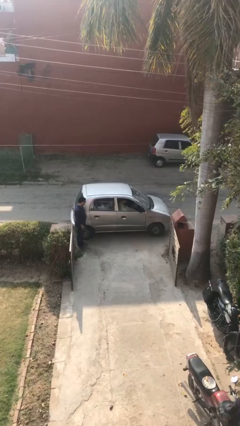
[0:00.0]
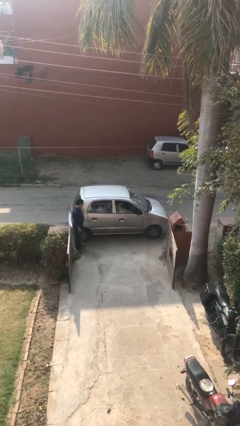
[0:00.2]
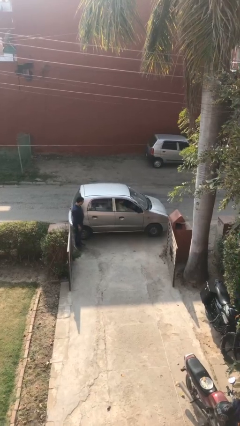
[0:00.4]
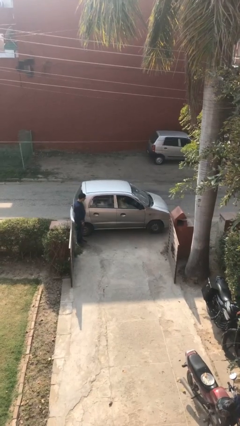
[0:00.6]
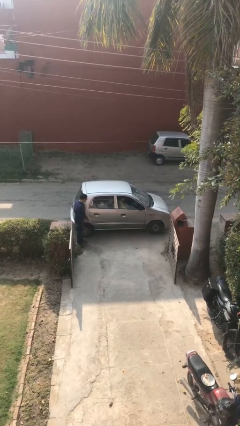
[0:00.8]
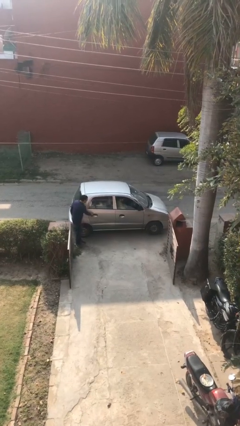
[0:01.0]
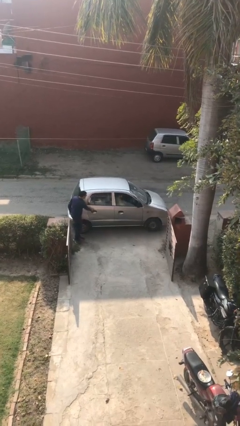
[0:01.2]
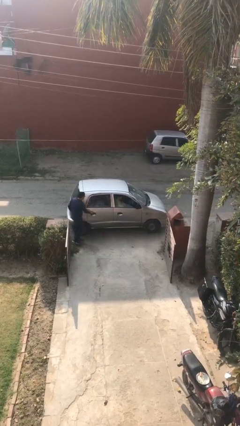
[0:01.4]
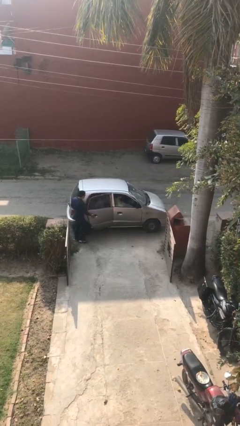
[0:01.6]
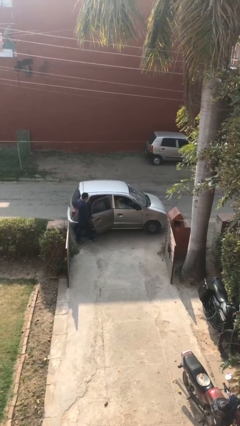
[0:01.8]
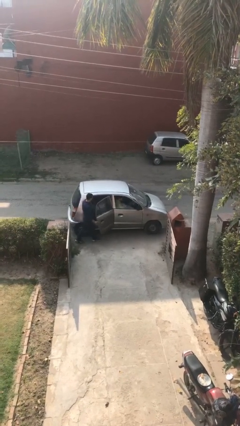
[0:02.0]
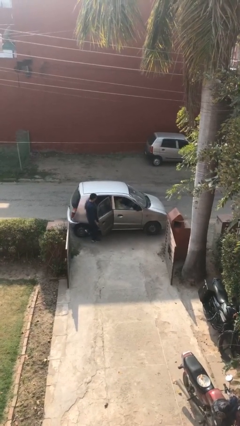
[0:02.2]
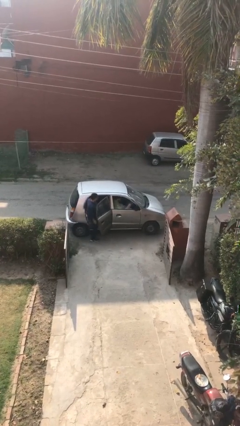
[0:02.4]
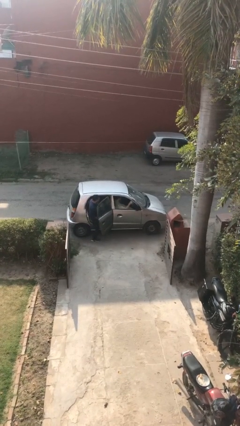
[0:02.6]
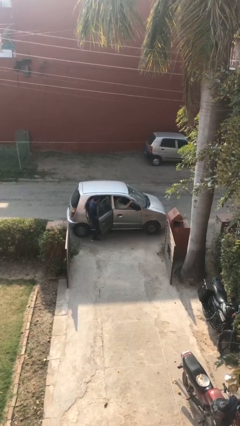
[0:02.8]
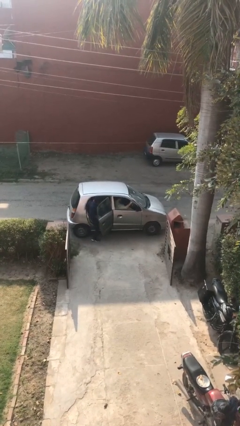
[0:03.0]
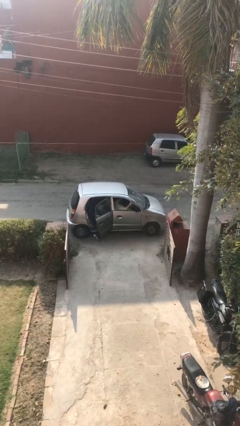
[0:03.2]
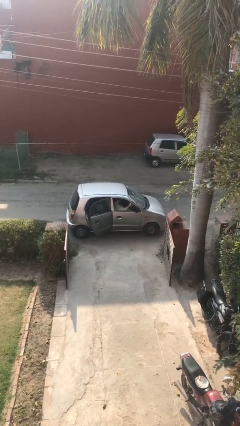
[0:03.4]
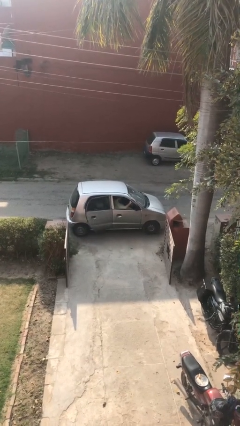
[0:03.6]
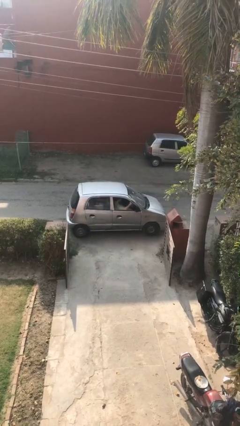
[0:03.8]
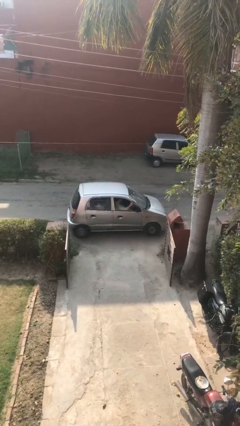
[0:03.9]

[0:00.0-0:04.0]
car picks up person

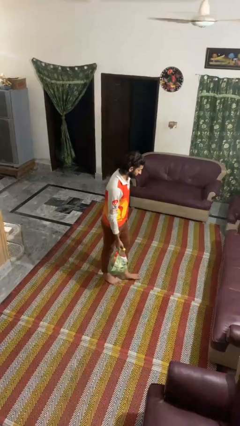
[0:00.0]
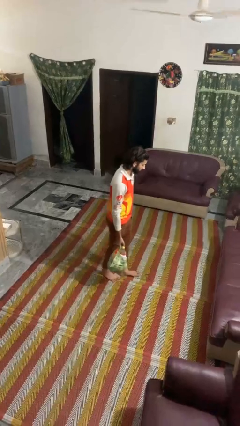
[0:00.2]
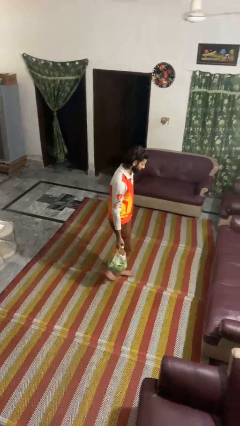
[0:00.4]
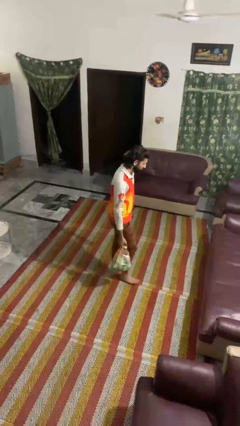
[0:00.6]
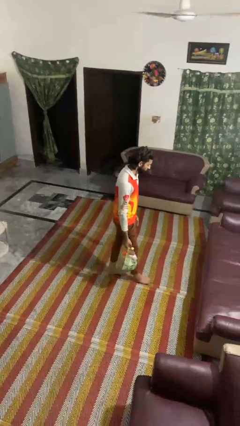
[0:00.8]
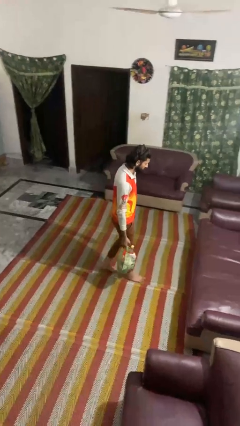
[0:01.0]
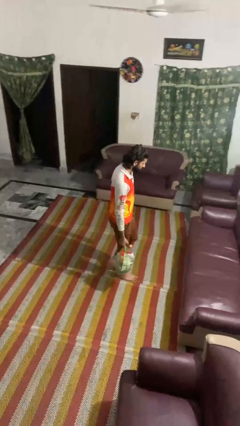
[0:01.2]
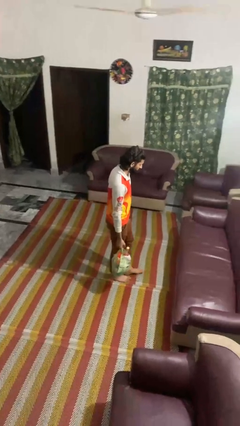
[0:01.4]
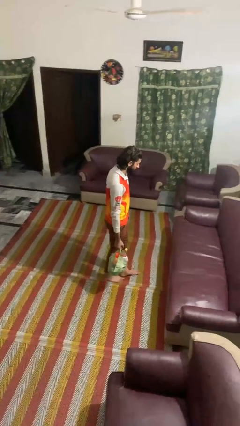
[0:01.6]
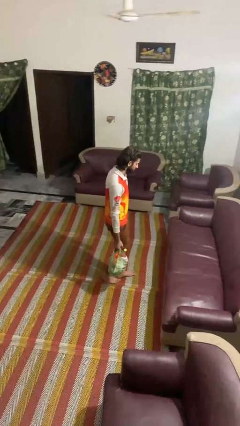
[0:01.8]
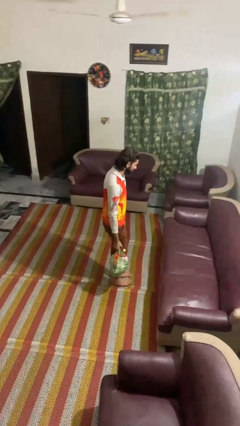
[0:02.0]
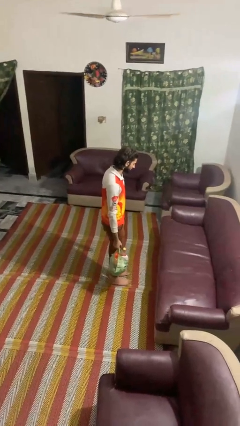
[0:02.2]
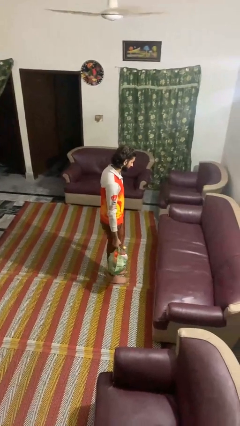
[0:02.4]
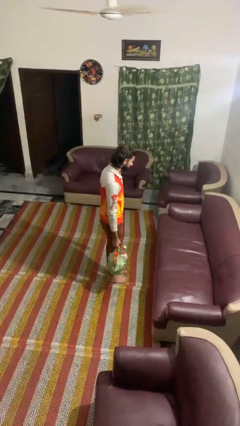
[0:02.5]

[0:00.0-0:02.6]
person carries groceries

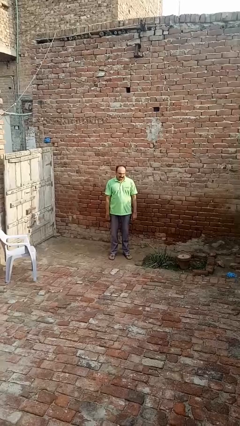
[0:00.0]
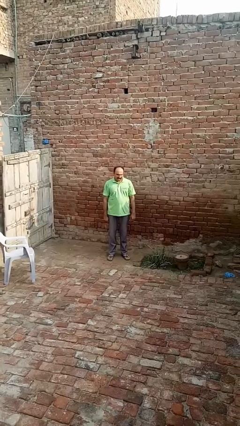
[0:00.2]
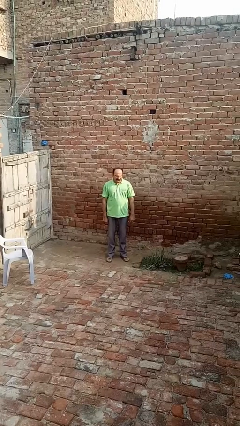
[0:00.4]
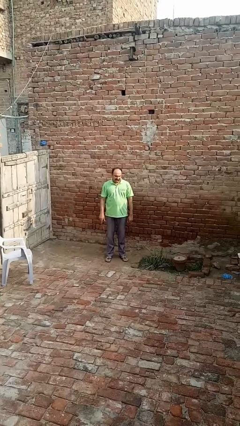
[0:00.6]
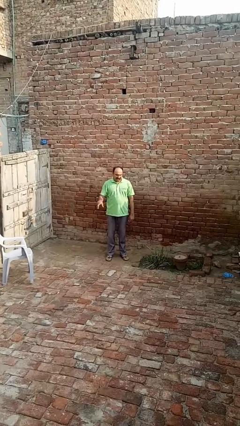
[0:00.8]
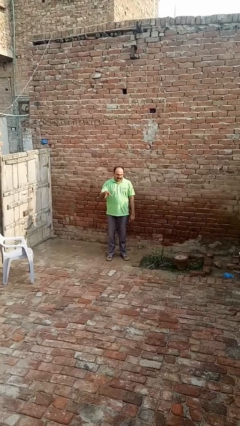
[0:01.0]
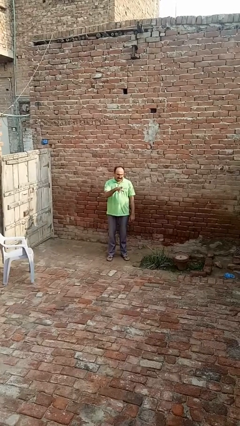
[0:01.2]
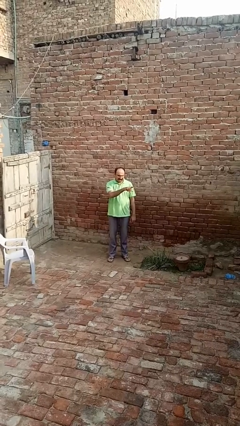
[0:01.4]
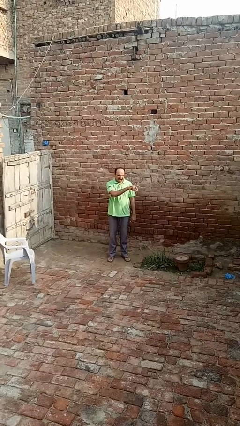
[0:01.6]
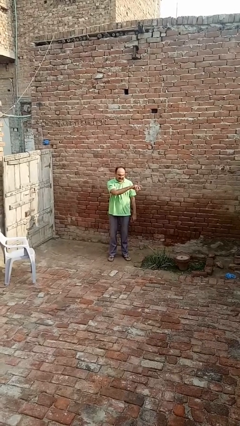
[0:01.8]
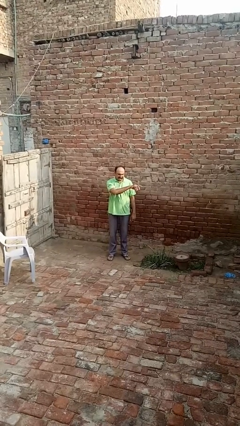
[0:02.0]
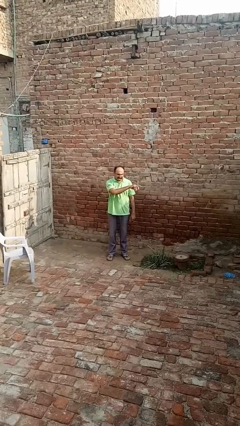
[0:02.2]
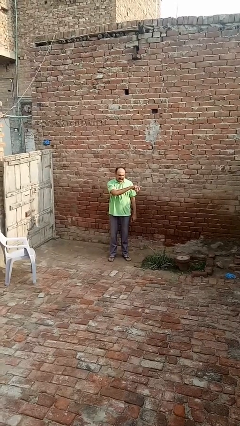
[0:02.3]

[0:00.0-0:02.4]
person gestures swipe left

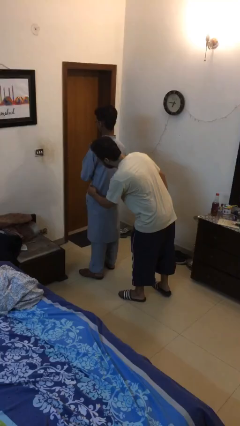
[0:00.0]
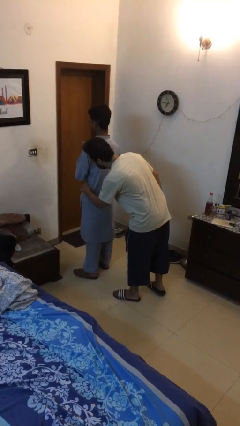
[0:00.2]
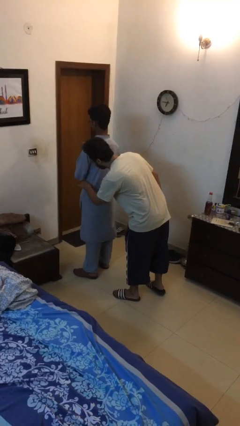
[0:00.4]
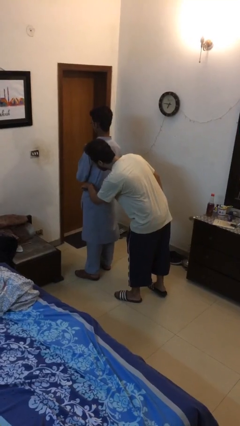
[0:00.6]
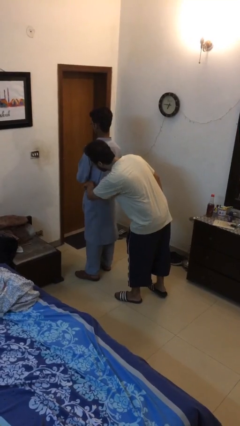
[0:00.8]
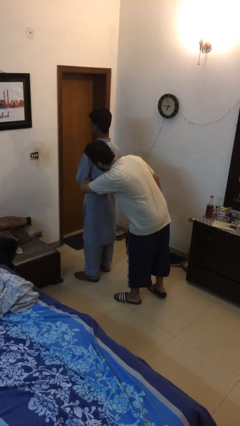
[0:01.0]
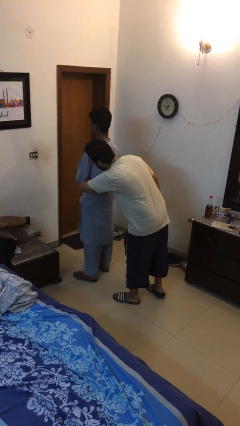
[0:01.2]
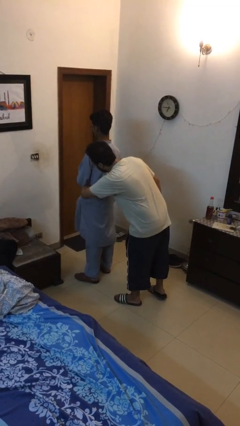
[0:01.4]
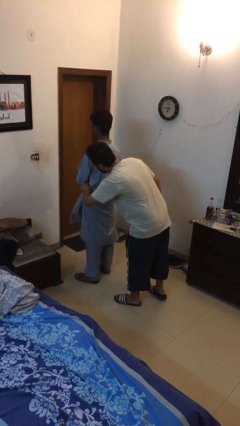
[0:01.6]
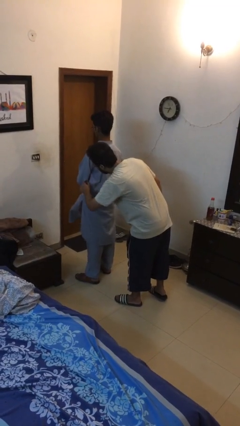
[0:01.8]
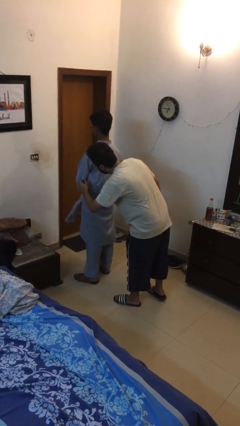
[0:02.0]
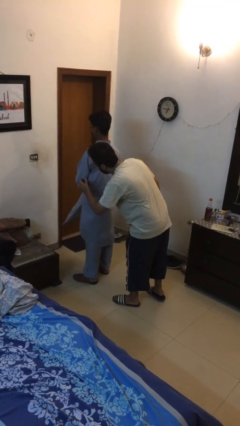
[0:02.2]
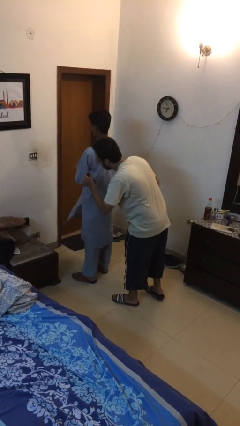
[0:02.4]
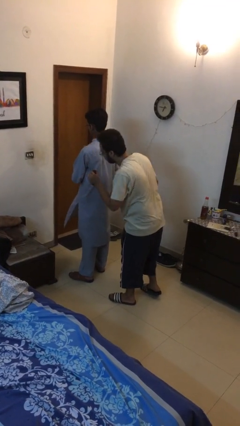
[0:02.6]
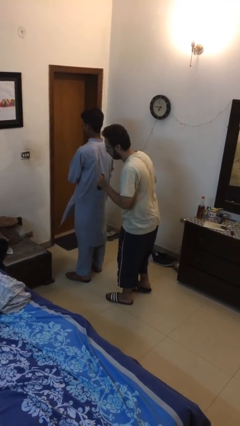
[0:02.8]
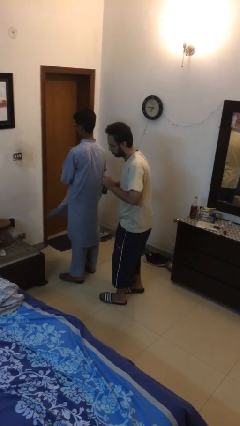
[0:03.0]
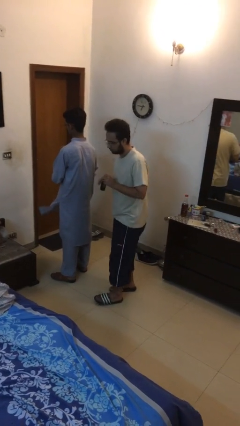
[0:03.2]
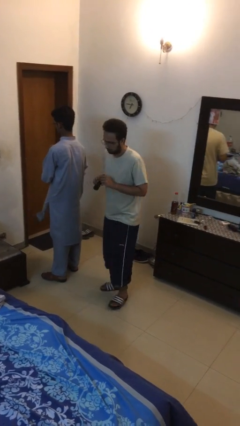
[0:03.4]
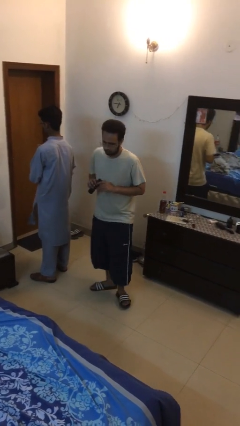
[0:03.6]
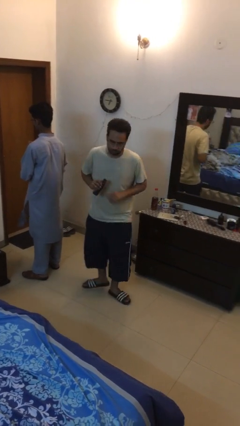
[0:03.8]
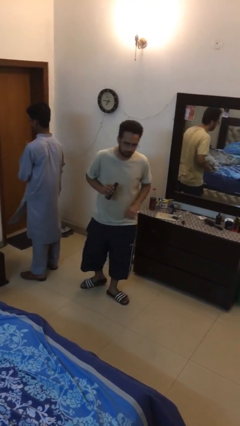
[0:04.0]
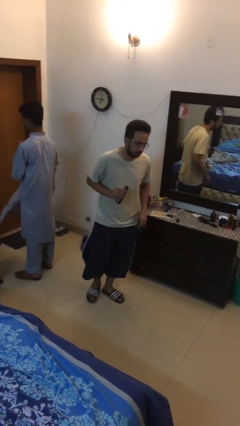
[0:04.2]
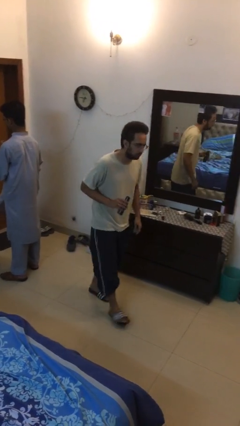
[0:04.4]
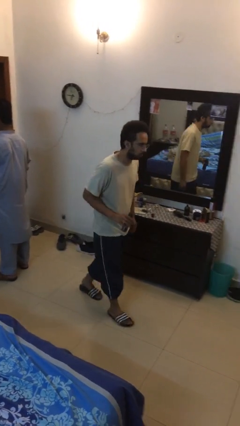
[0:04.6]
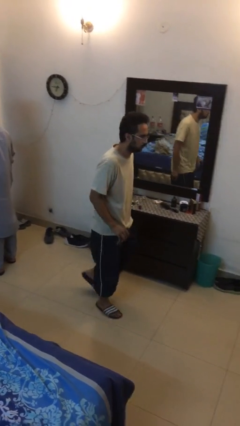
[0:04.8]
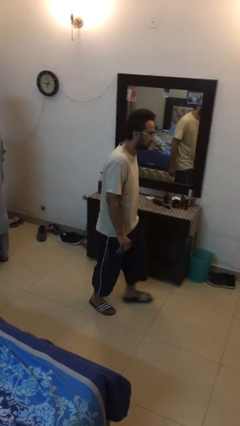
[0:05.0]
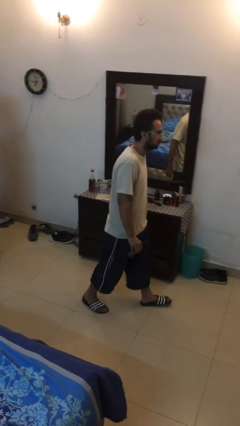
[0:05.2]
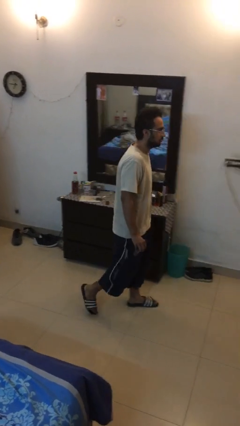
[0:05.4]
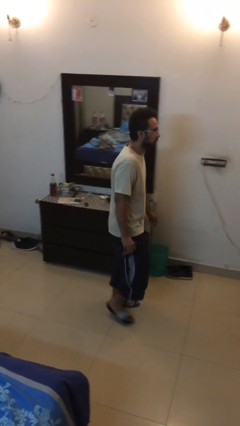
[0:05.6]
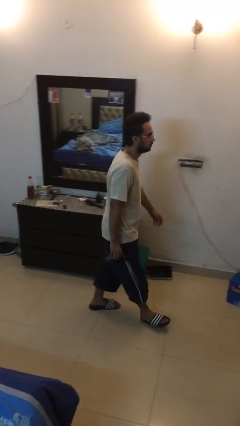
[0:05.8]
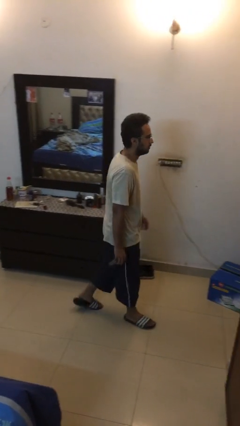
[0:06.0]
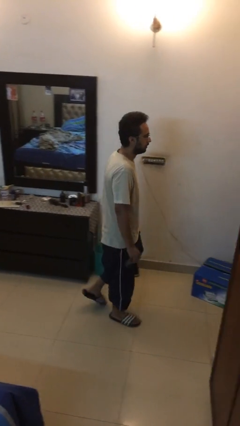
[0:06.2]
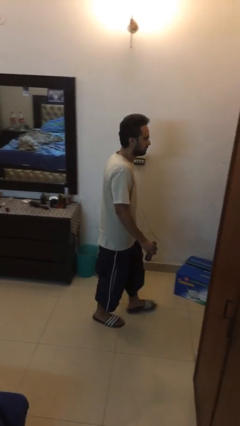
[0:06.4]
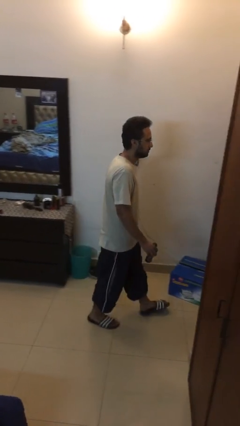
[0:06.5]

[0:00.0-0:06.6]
person steals object from person

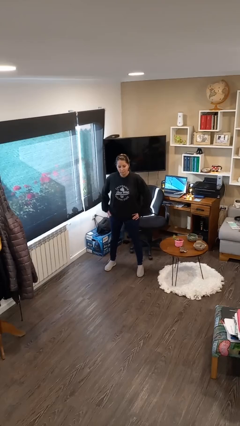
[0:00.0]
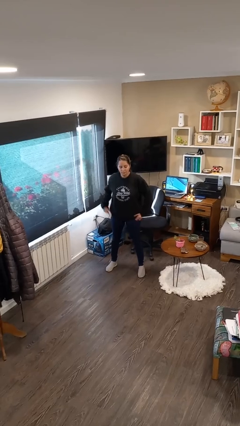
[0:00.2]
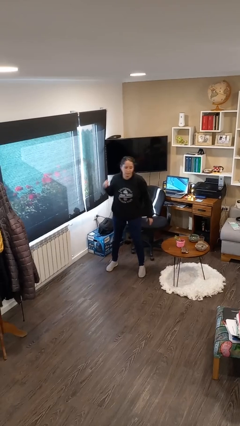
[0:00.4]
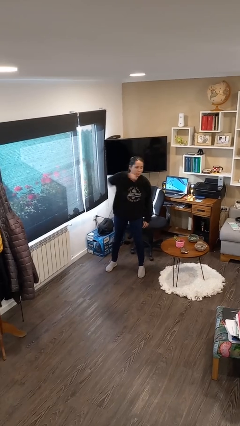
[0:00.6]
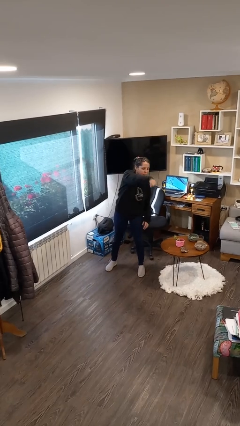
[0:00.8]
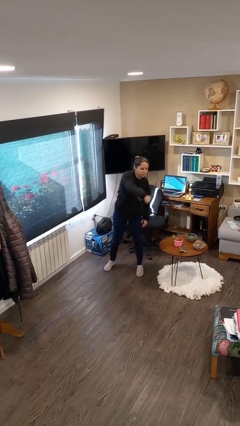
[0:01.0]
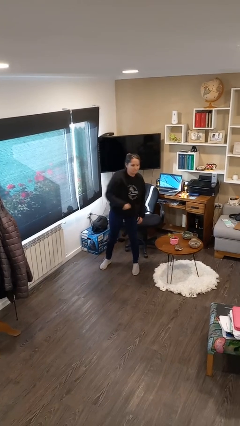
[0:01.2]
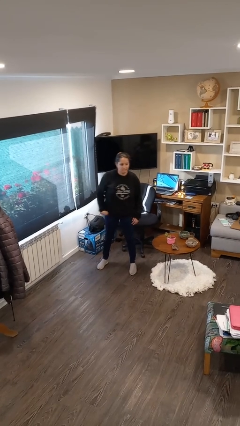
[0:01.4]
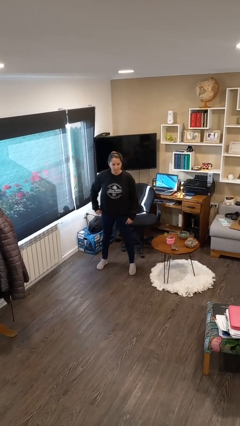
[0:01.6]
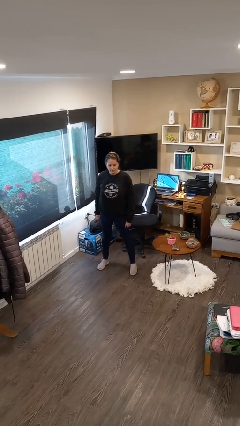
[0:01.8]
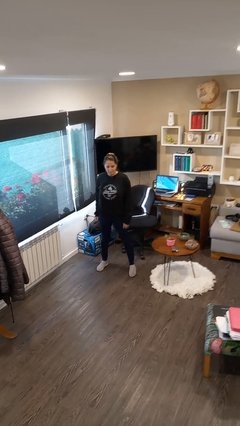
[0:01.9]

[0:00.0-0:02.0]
person punches

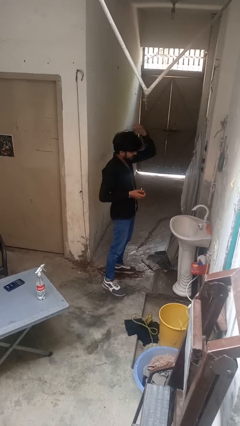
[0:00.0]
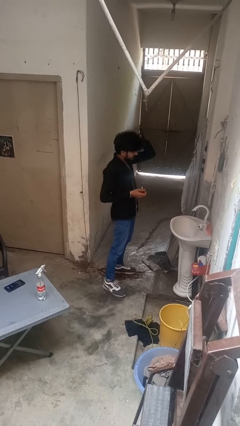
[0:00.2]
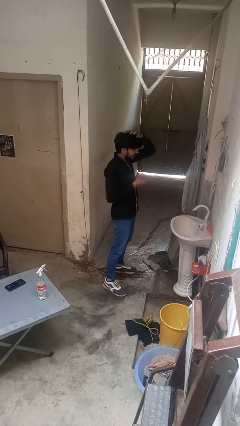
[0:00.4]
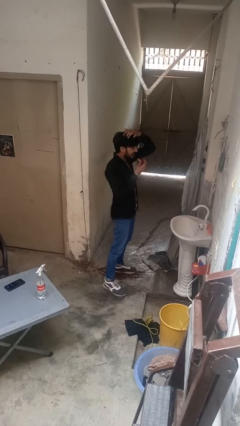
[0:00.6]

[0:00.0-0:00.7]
person applies lip makeup
